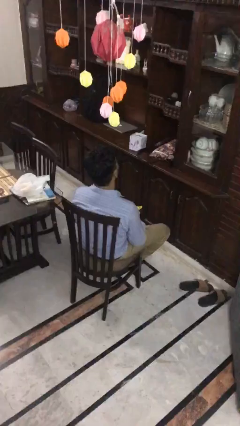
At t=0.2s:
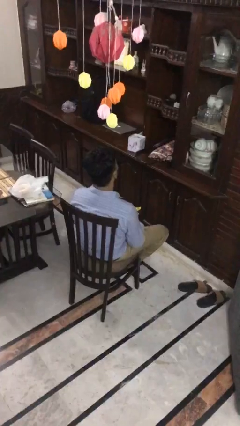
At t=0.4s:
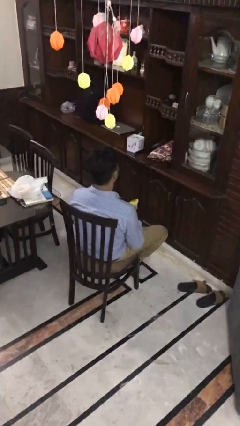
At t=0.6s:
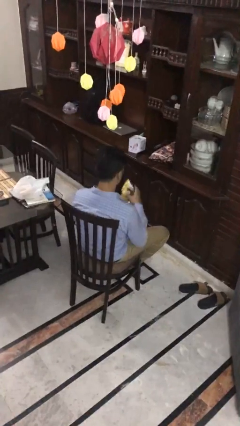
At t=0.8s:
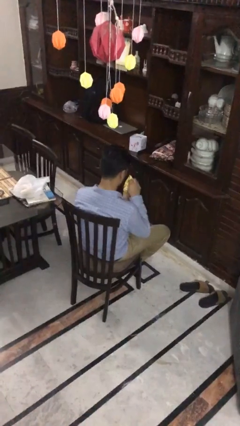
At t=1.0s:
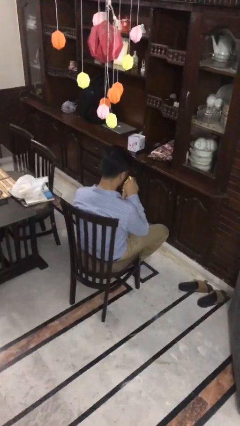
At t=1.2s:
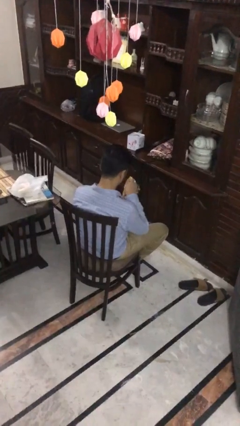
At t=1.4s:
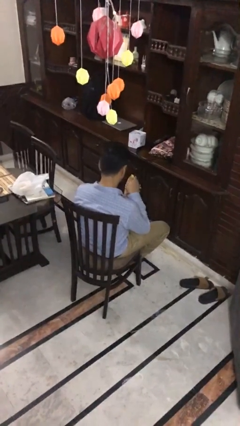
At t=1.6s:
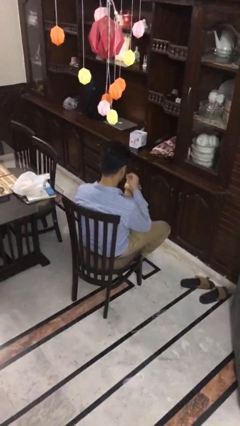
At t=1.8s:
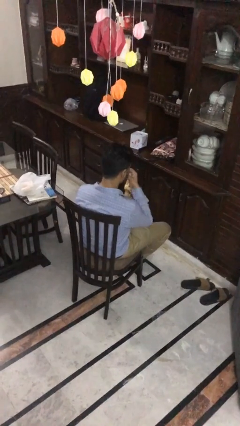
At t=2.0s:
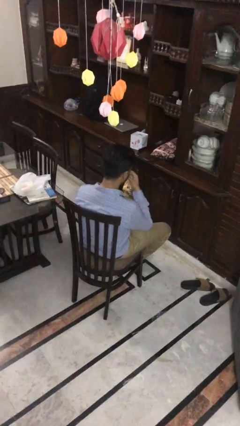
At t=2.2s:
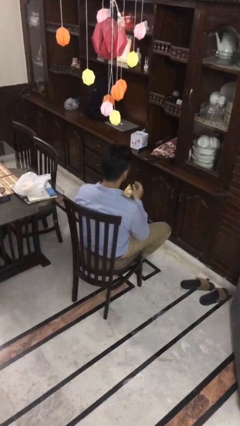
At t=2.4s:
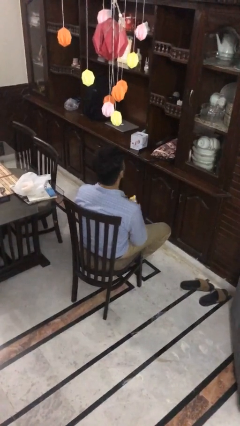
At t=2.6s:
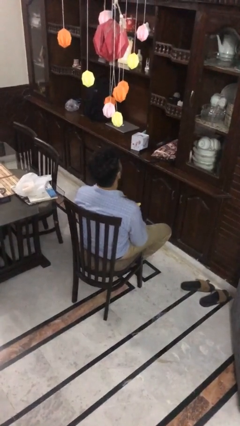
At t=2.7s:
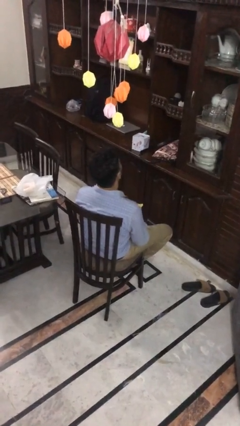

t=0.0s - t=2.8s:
person eats snack from bag

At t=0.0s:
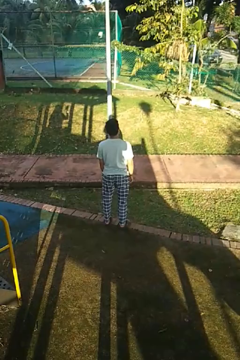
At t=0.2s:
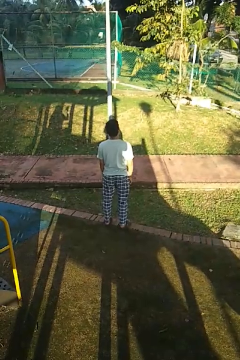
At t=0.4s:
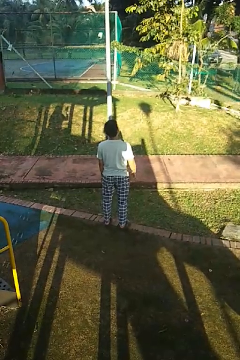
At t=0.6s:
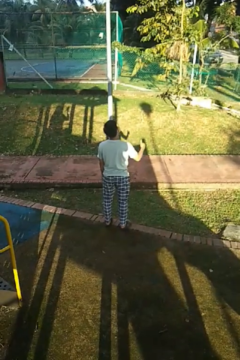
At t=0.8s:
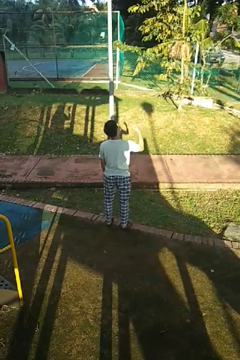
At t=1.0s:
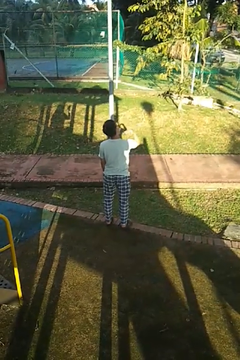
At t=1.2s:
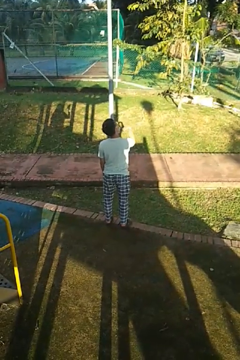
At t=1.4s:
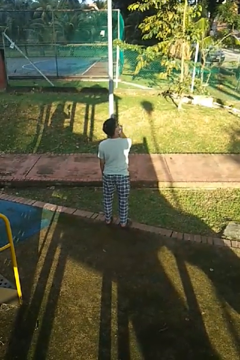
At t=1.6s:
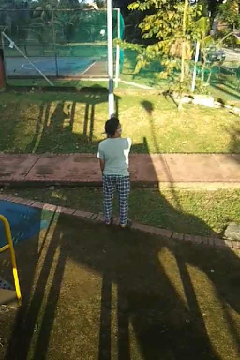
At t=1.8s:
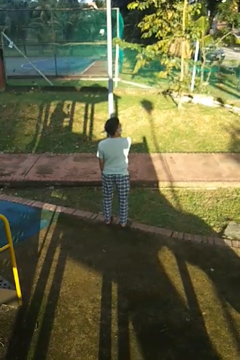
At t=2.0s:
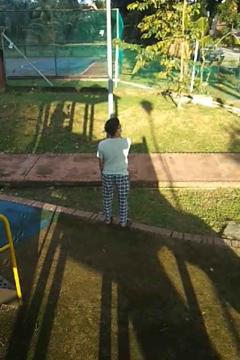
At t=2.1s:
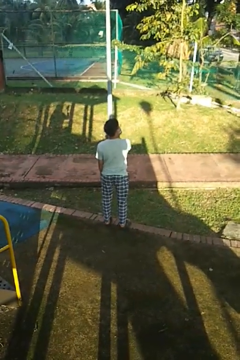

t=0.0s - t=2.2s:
person gestures cut

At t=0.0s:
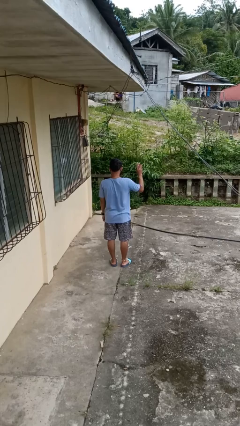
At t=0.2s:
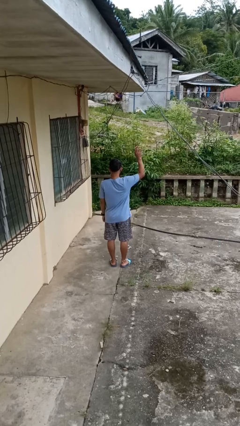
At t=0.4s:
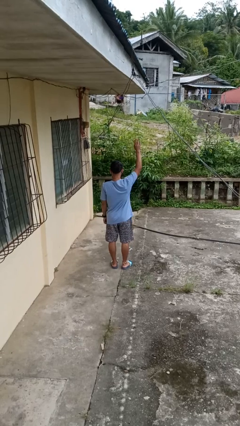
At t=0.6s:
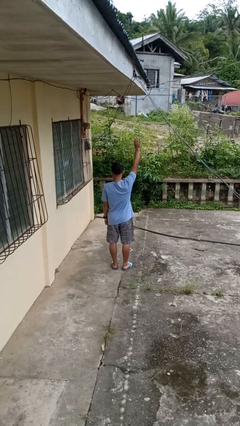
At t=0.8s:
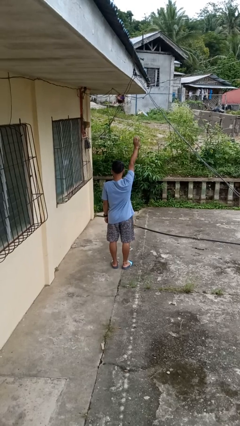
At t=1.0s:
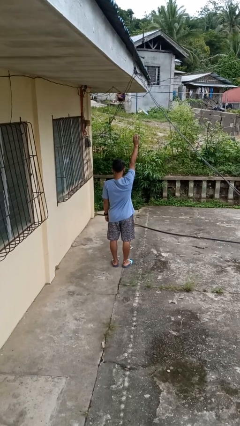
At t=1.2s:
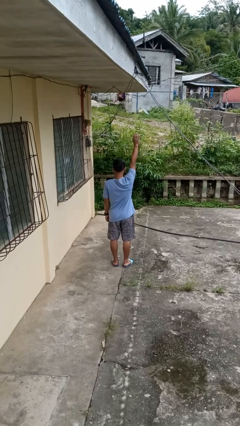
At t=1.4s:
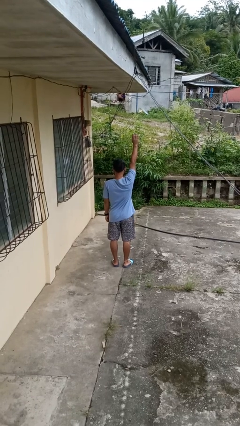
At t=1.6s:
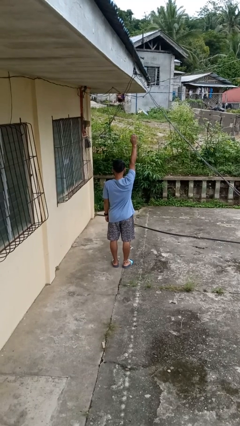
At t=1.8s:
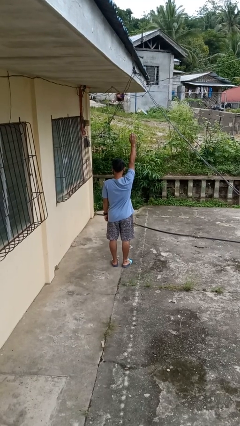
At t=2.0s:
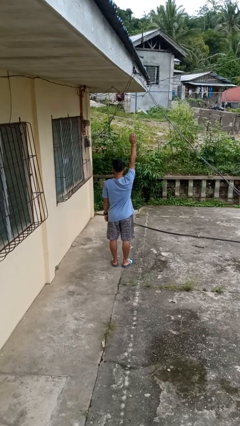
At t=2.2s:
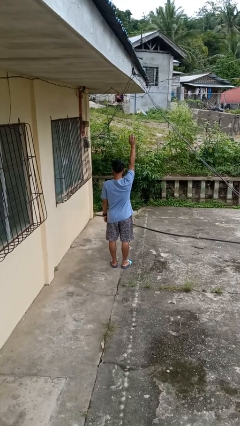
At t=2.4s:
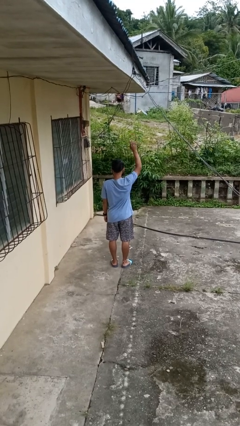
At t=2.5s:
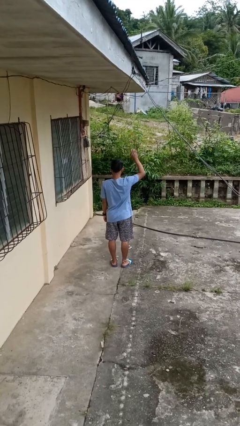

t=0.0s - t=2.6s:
person gestures raise hand

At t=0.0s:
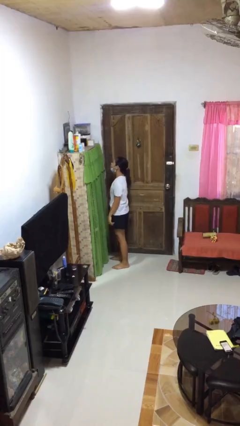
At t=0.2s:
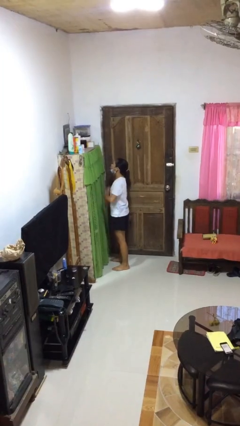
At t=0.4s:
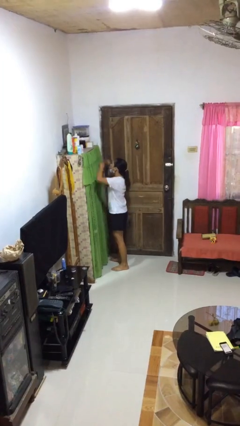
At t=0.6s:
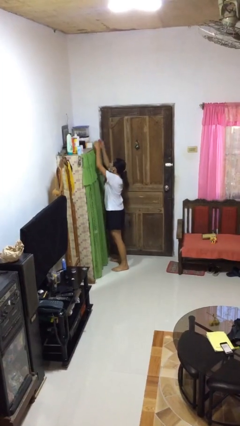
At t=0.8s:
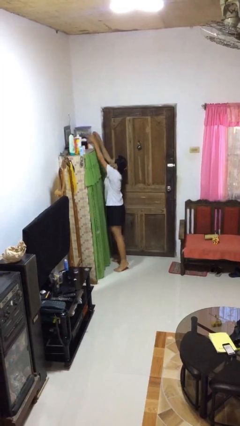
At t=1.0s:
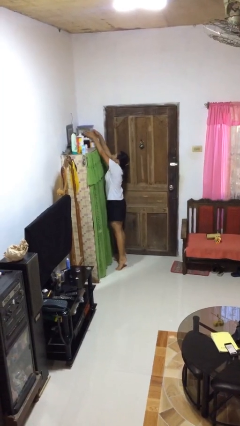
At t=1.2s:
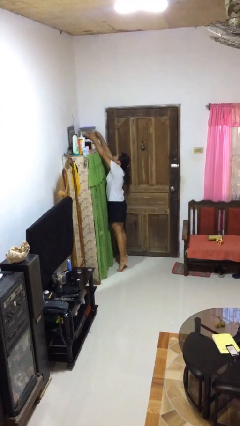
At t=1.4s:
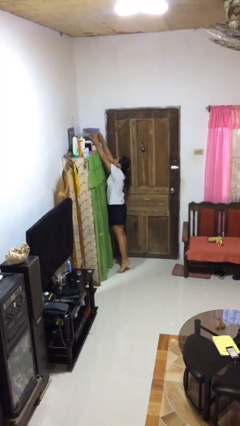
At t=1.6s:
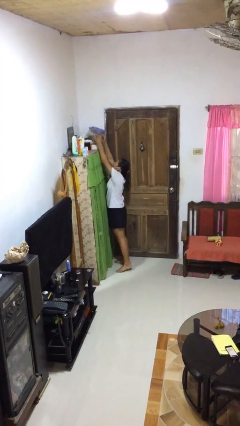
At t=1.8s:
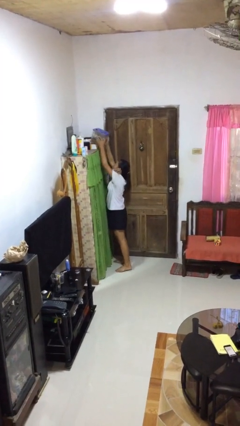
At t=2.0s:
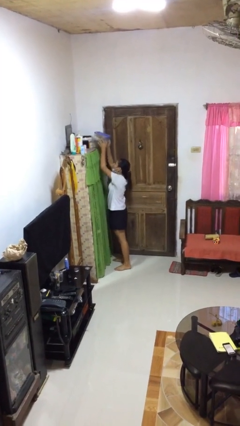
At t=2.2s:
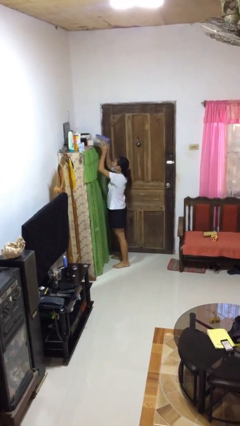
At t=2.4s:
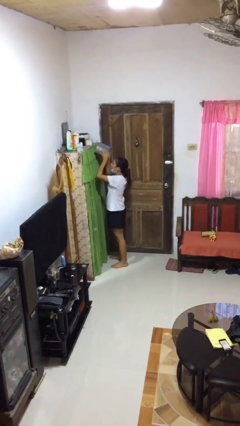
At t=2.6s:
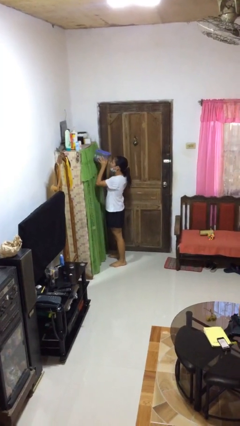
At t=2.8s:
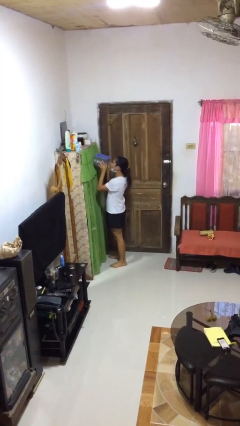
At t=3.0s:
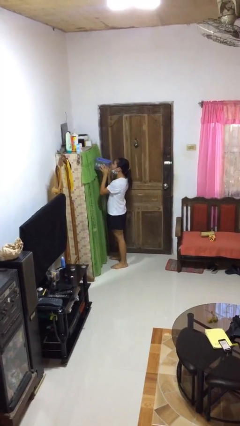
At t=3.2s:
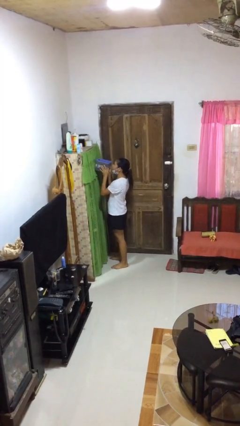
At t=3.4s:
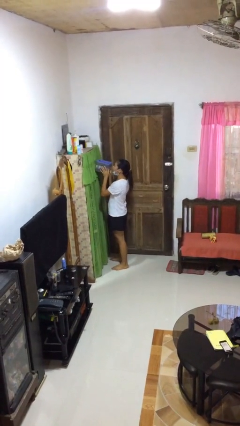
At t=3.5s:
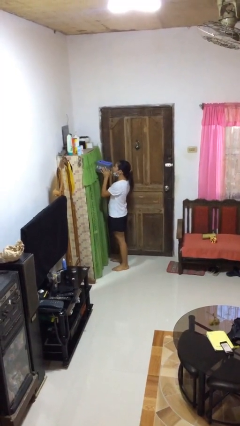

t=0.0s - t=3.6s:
person picks up object from shelf

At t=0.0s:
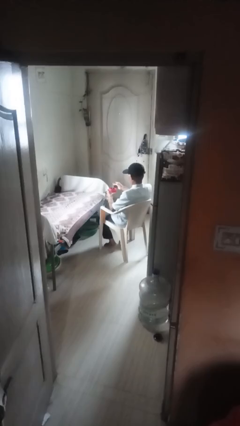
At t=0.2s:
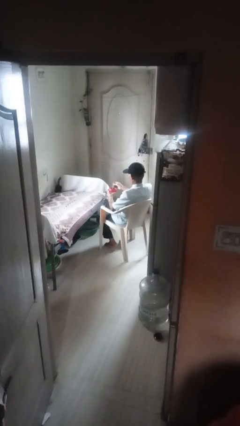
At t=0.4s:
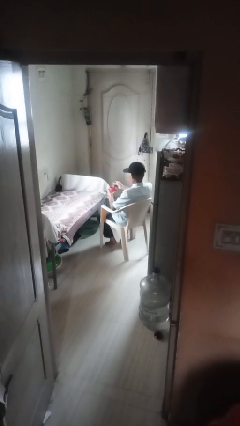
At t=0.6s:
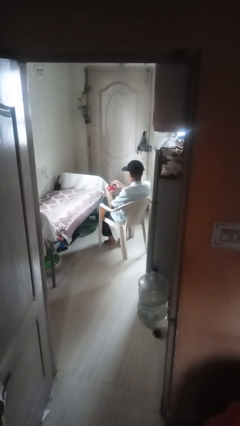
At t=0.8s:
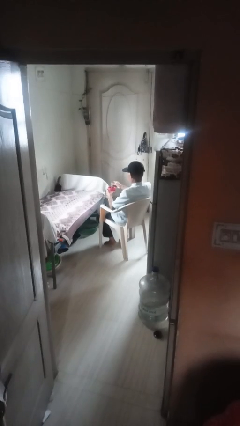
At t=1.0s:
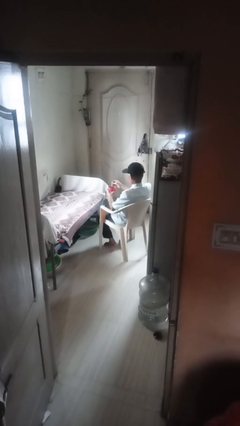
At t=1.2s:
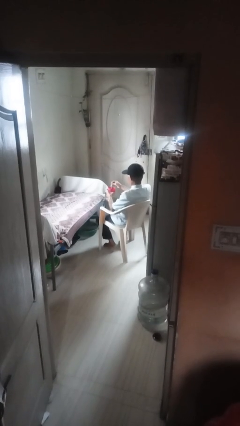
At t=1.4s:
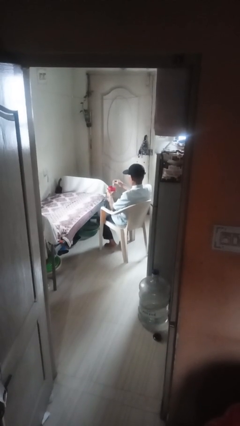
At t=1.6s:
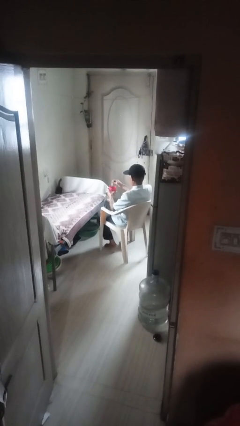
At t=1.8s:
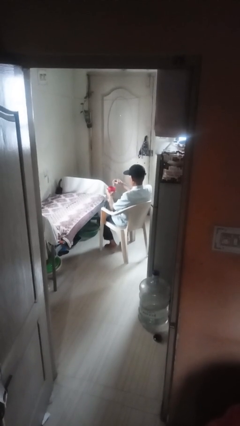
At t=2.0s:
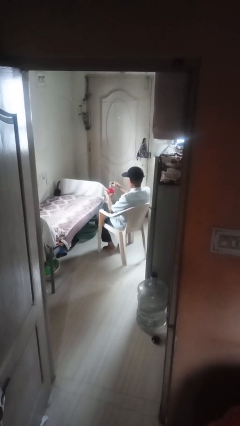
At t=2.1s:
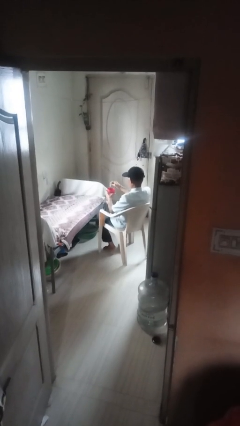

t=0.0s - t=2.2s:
person stirs mug

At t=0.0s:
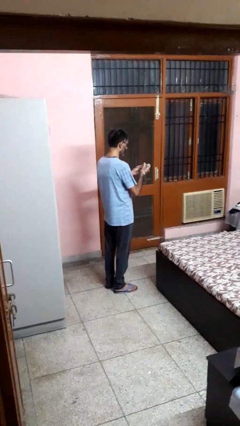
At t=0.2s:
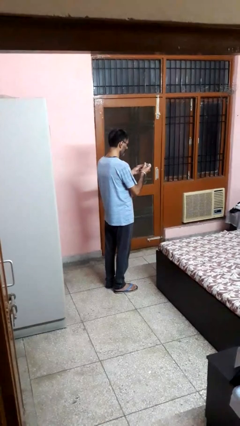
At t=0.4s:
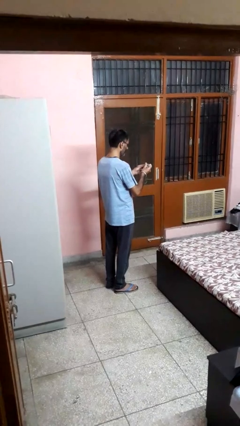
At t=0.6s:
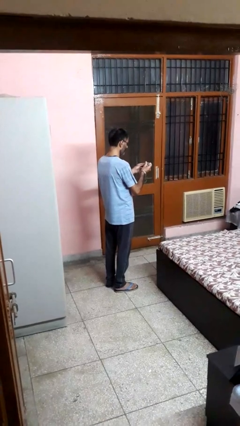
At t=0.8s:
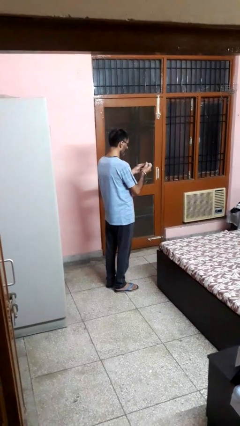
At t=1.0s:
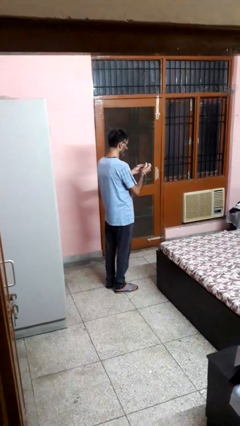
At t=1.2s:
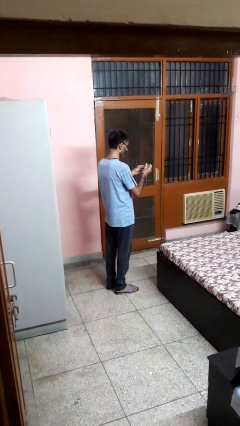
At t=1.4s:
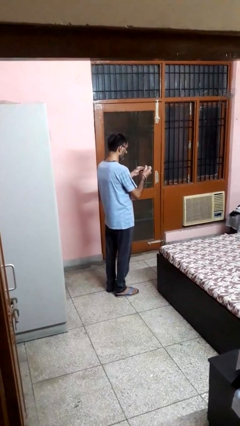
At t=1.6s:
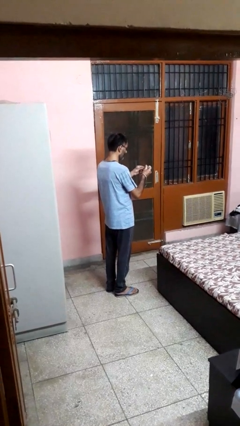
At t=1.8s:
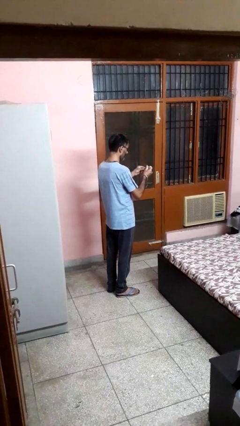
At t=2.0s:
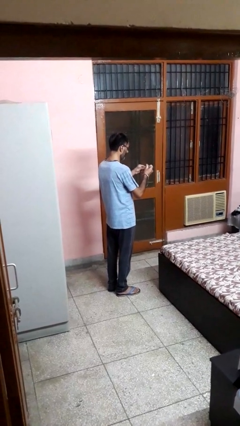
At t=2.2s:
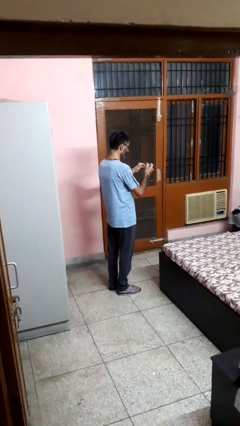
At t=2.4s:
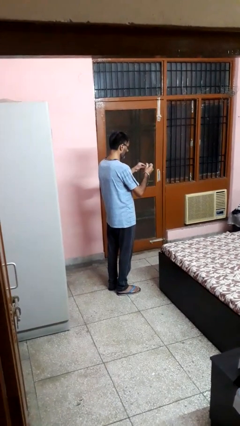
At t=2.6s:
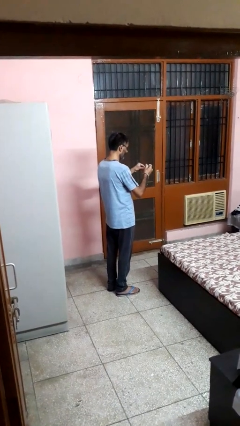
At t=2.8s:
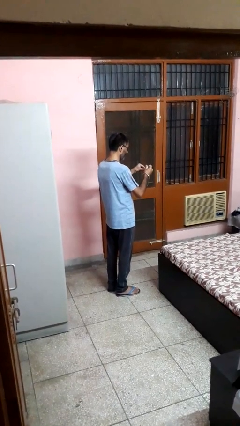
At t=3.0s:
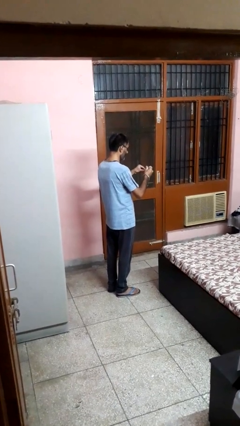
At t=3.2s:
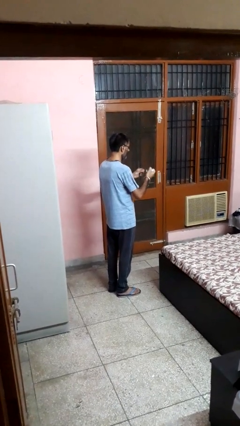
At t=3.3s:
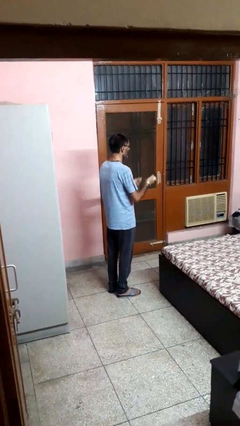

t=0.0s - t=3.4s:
person clips fingernails

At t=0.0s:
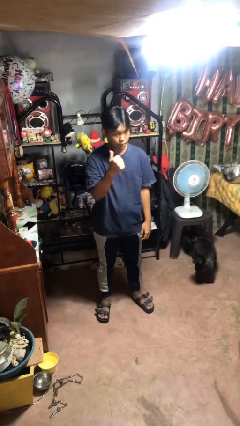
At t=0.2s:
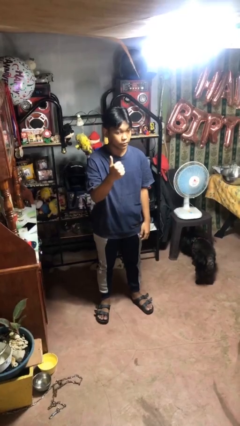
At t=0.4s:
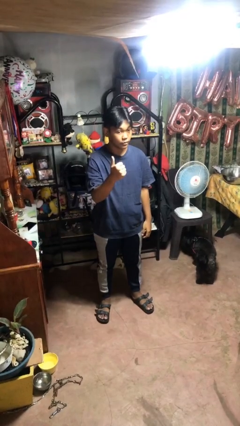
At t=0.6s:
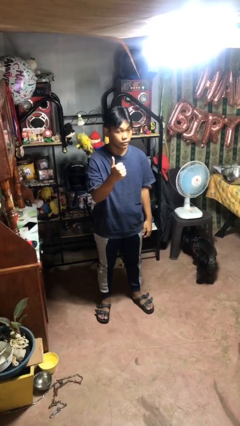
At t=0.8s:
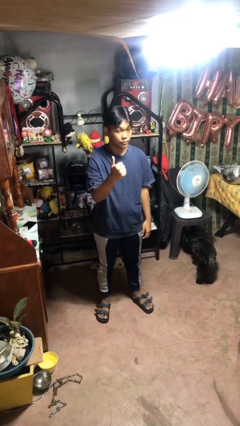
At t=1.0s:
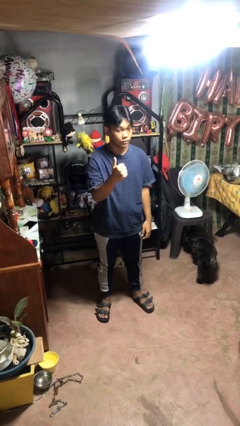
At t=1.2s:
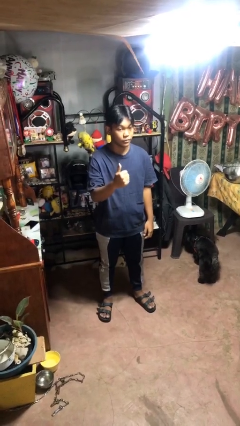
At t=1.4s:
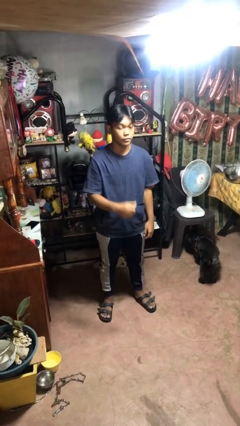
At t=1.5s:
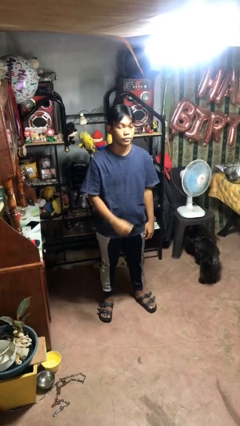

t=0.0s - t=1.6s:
person gestures thumbs up
